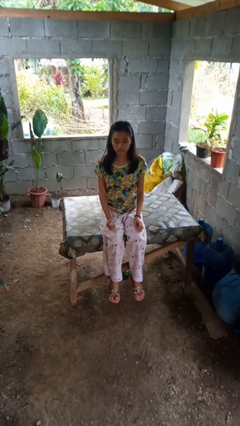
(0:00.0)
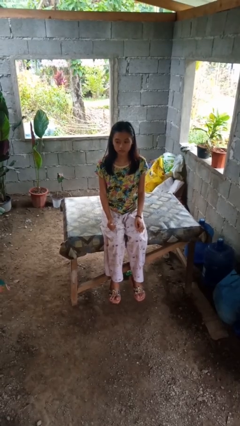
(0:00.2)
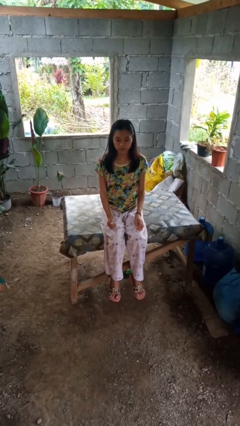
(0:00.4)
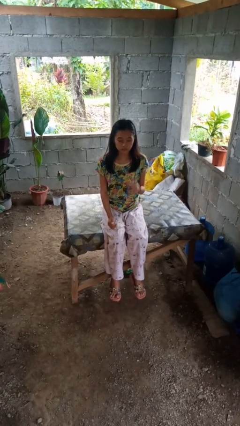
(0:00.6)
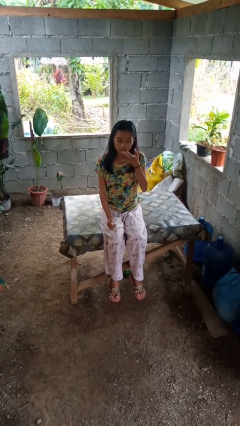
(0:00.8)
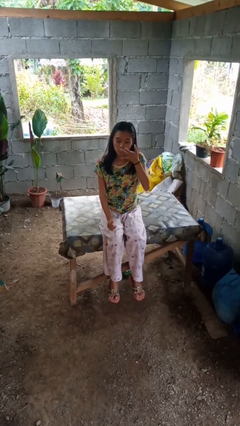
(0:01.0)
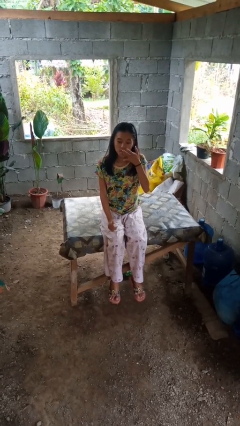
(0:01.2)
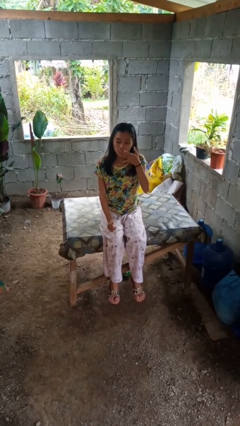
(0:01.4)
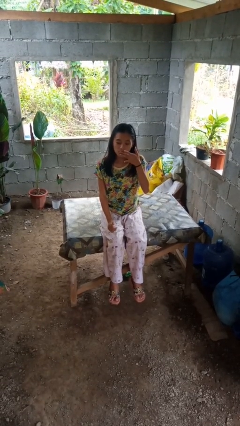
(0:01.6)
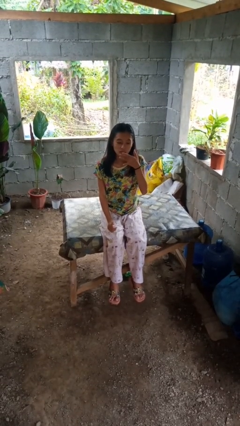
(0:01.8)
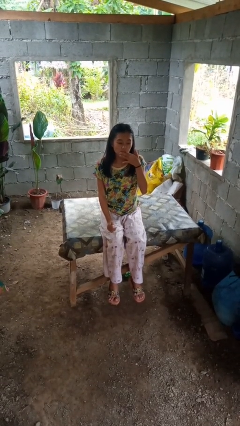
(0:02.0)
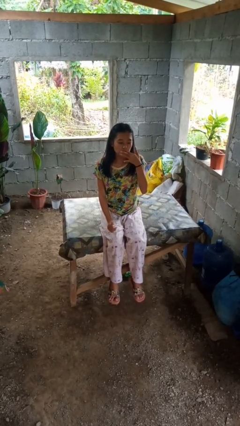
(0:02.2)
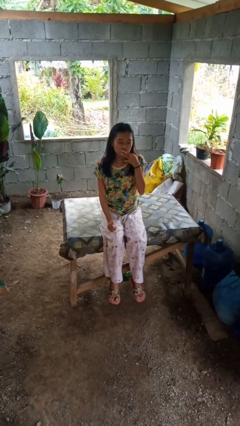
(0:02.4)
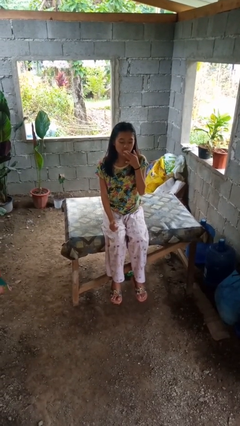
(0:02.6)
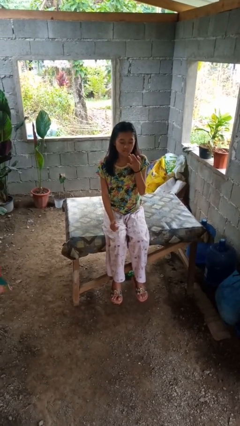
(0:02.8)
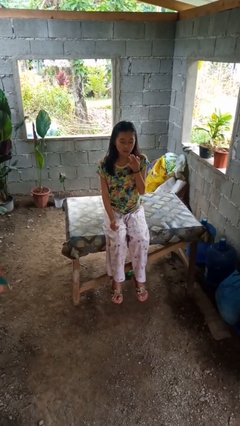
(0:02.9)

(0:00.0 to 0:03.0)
person licks fingers

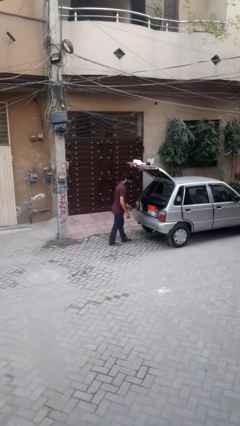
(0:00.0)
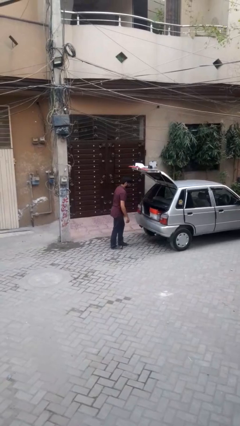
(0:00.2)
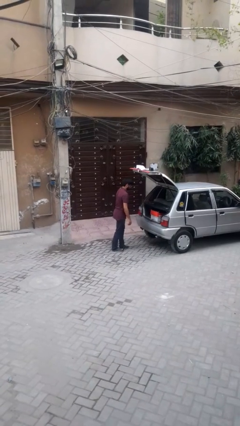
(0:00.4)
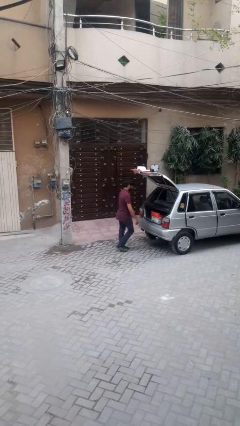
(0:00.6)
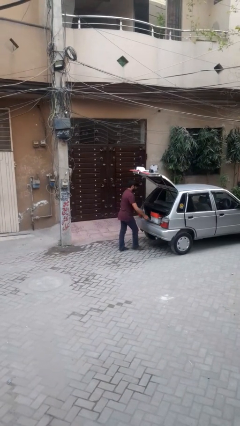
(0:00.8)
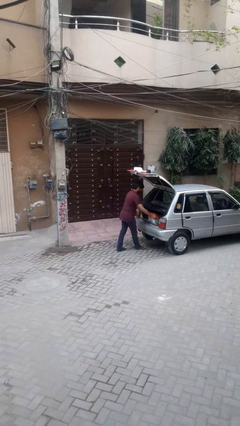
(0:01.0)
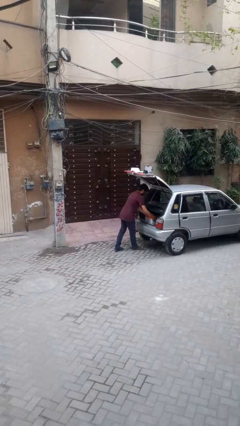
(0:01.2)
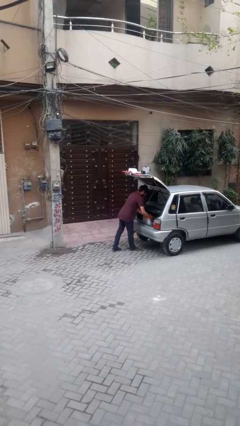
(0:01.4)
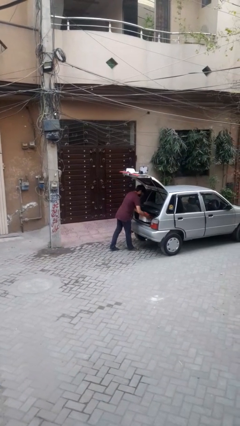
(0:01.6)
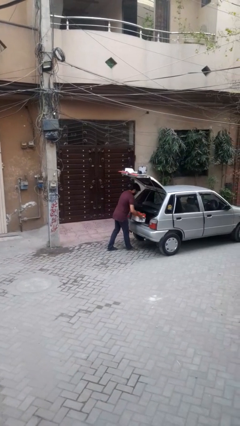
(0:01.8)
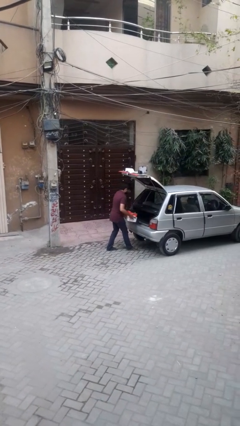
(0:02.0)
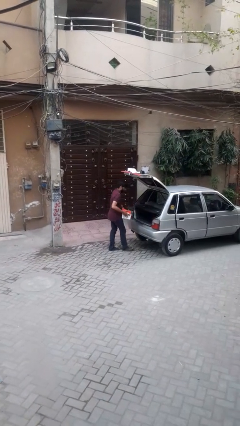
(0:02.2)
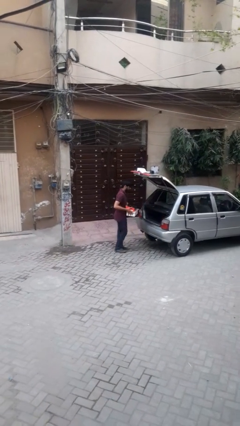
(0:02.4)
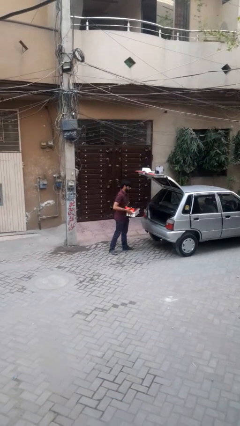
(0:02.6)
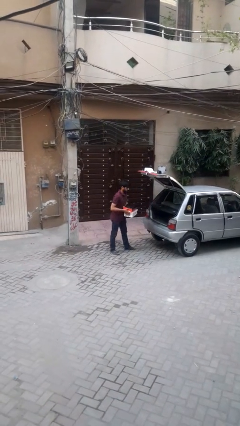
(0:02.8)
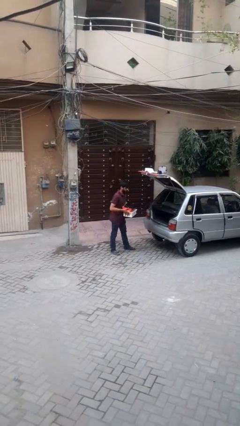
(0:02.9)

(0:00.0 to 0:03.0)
person unloads car

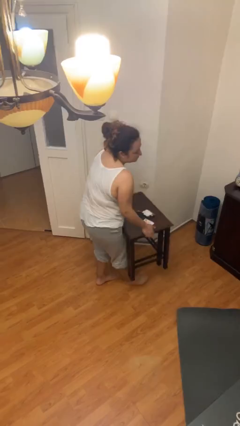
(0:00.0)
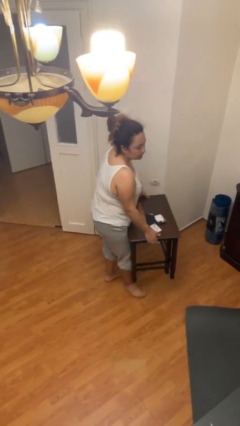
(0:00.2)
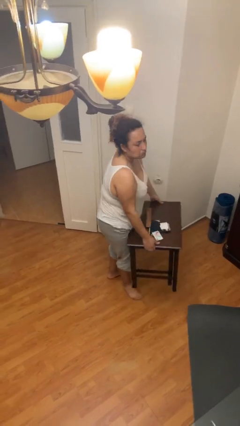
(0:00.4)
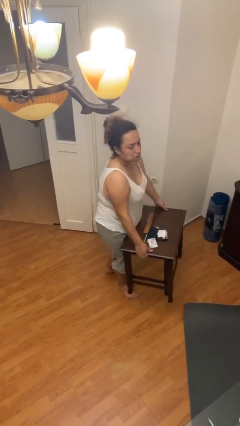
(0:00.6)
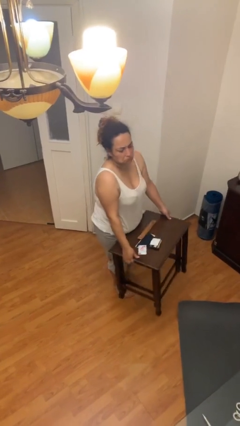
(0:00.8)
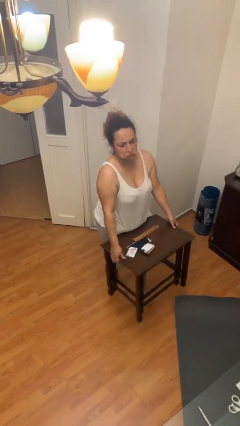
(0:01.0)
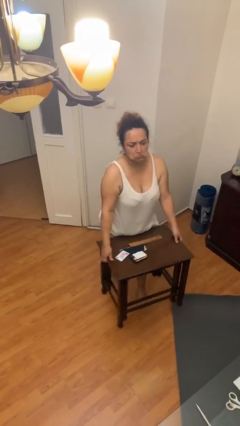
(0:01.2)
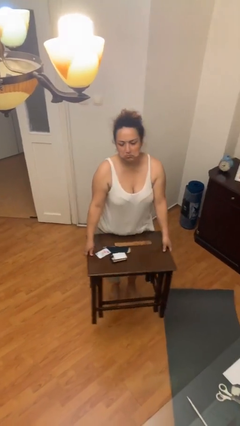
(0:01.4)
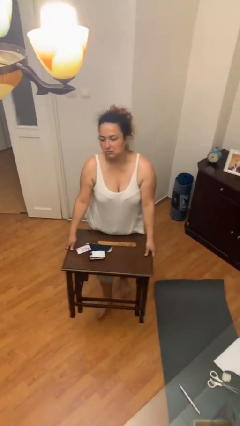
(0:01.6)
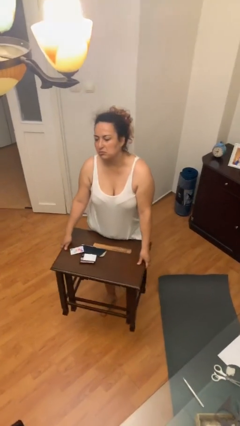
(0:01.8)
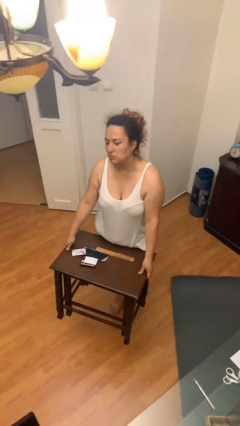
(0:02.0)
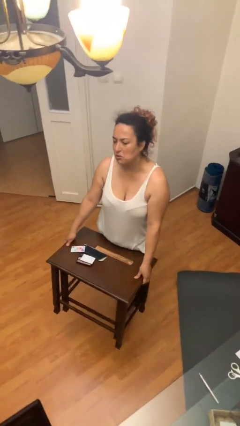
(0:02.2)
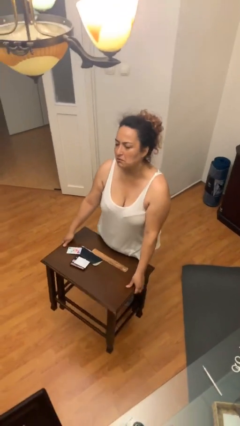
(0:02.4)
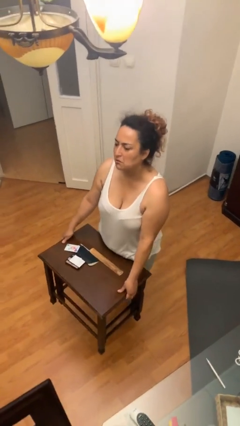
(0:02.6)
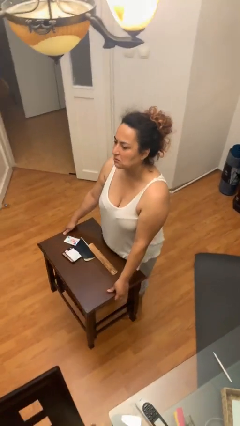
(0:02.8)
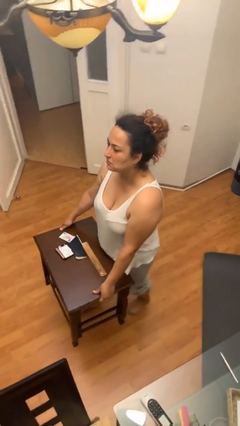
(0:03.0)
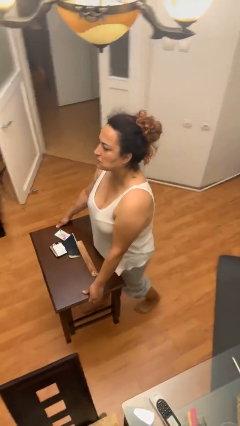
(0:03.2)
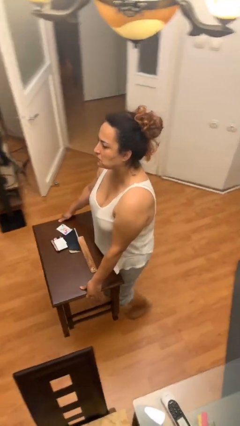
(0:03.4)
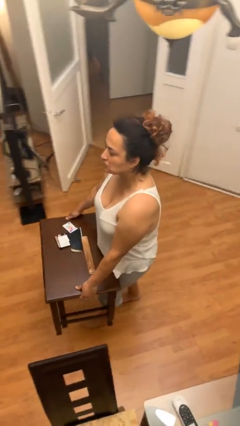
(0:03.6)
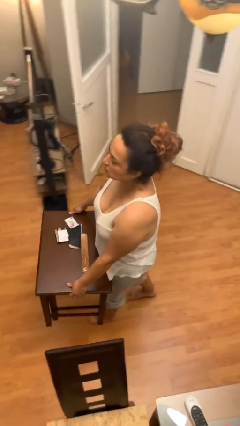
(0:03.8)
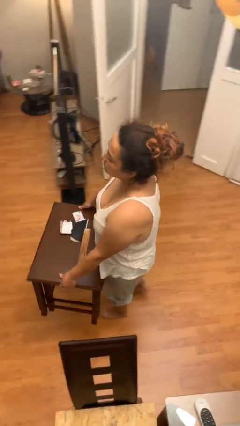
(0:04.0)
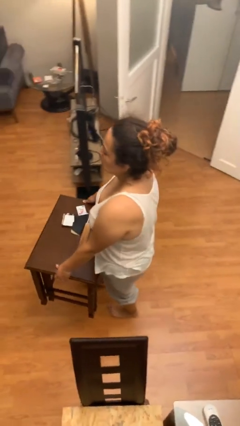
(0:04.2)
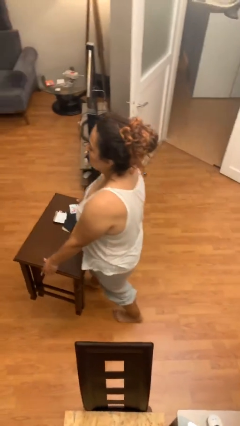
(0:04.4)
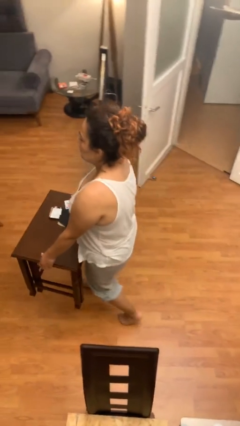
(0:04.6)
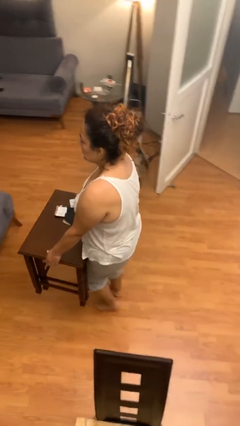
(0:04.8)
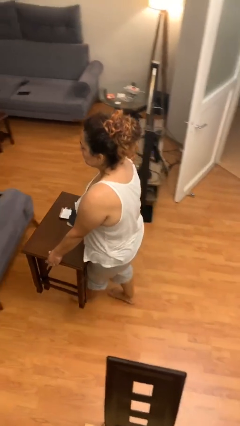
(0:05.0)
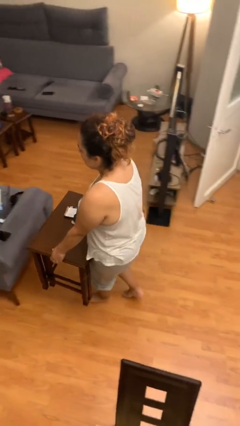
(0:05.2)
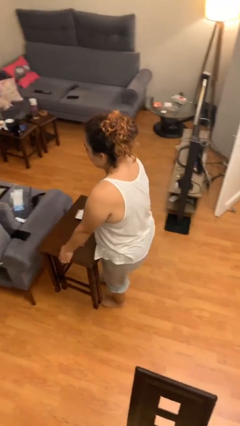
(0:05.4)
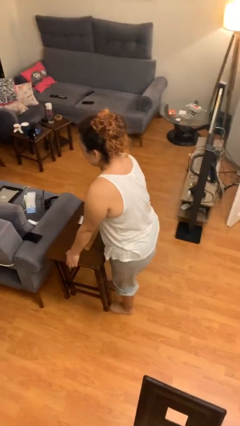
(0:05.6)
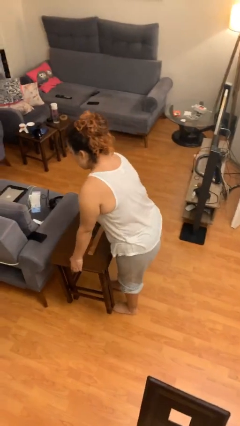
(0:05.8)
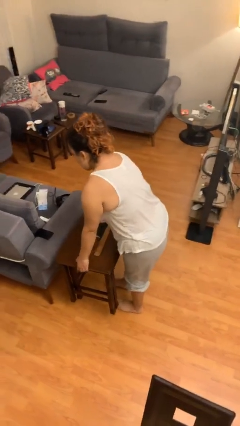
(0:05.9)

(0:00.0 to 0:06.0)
person carries heavy object

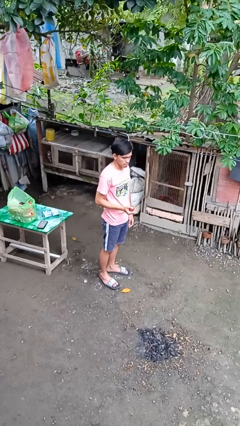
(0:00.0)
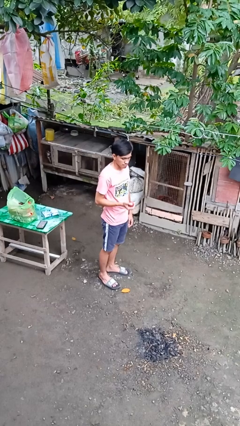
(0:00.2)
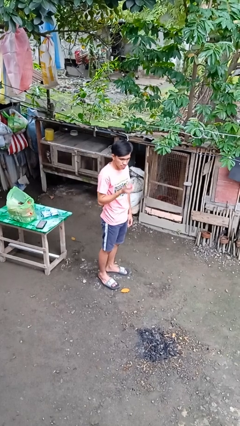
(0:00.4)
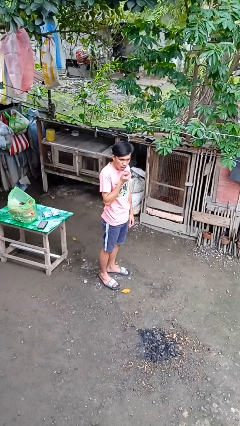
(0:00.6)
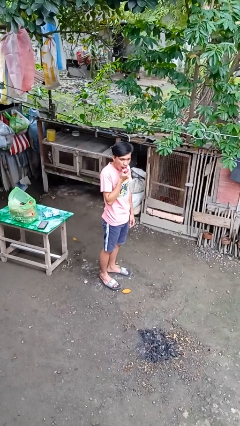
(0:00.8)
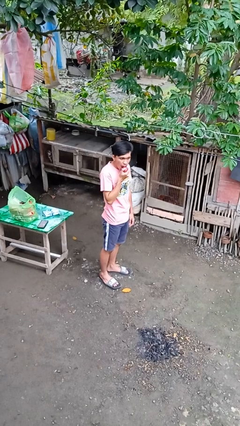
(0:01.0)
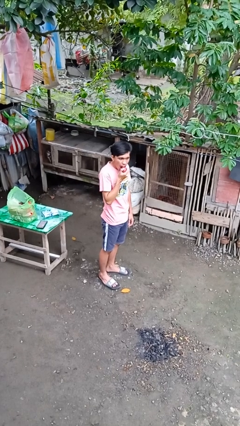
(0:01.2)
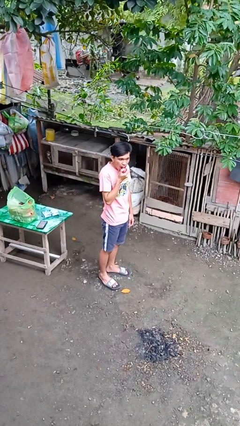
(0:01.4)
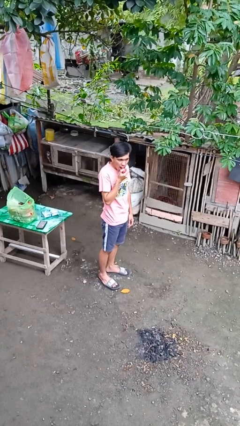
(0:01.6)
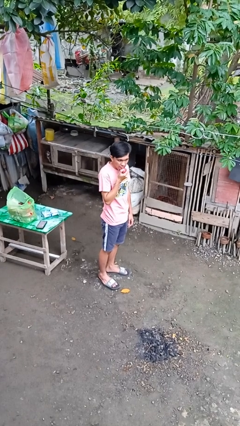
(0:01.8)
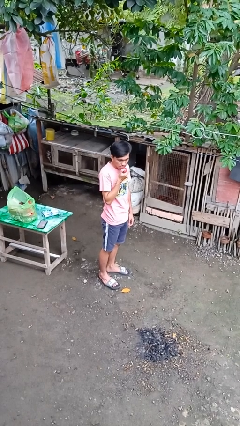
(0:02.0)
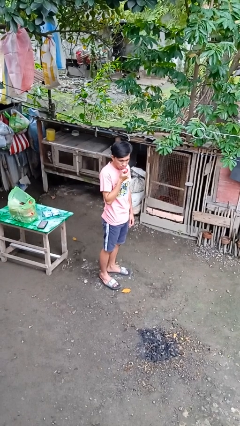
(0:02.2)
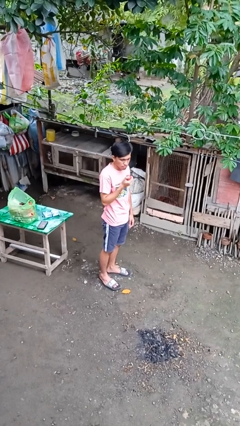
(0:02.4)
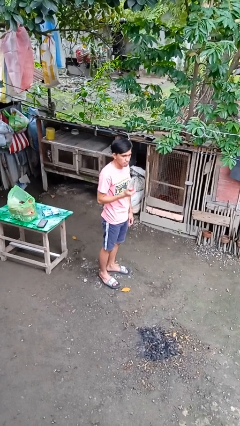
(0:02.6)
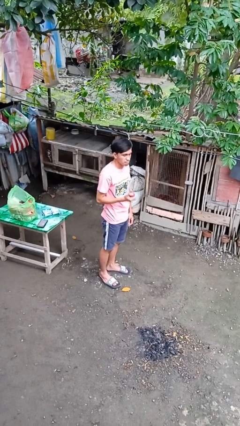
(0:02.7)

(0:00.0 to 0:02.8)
person eats apple

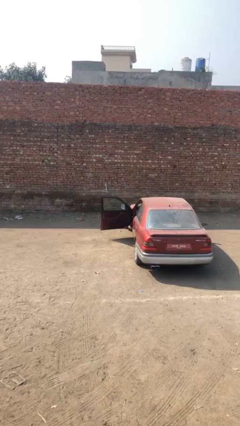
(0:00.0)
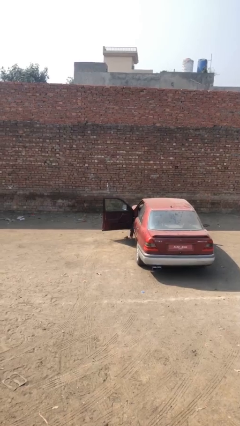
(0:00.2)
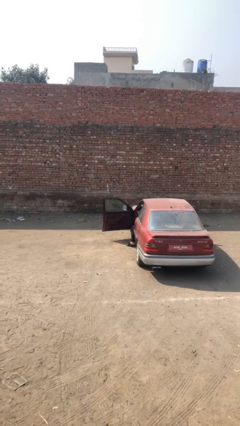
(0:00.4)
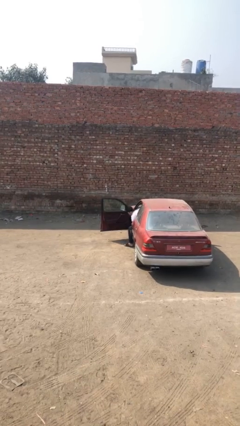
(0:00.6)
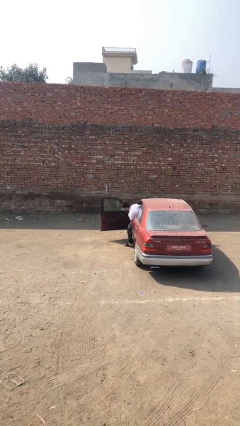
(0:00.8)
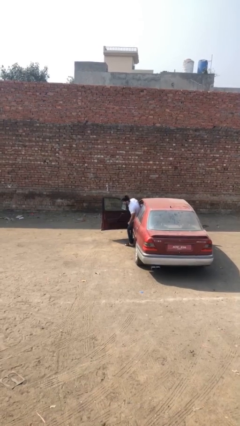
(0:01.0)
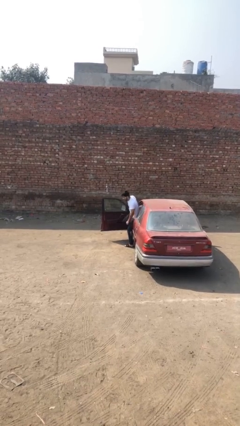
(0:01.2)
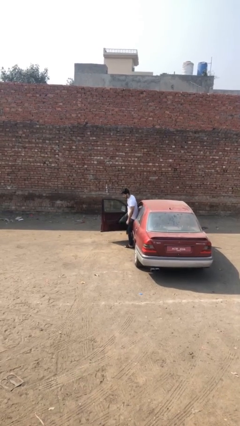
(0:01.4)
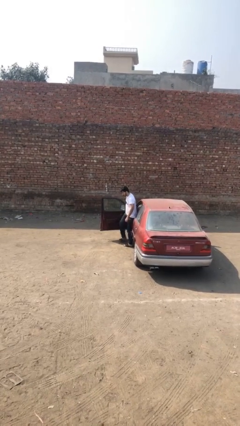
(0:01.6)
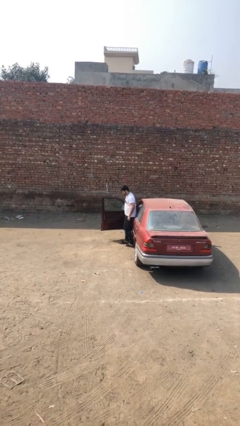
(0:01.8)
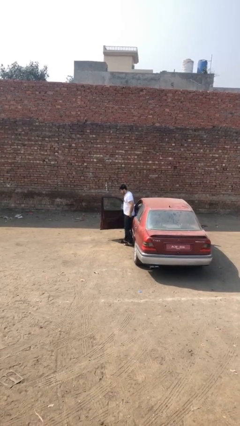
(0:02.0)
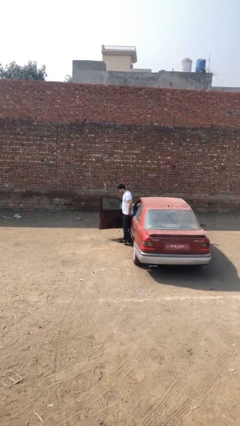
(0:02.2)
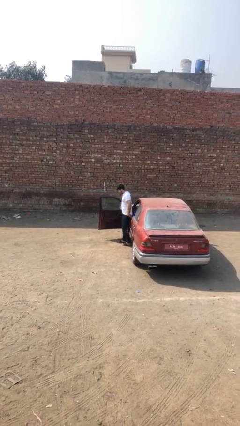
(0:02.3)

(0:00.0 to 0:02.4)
person exits car

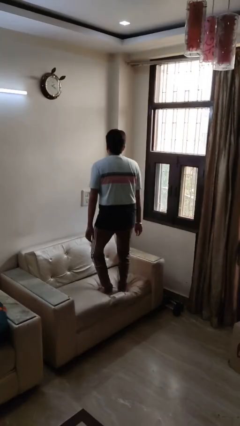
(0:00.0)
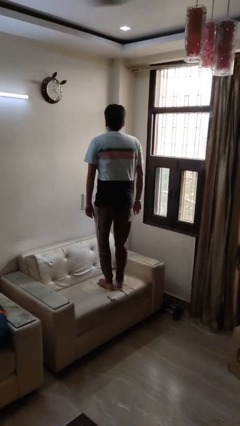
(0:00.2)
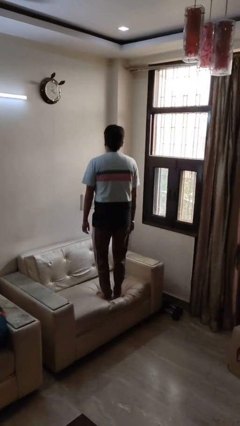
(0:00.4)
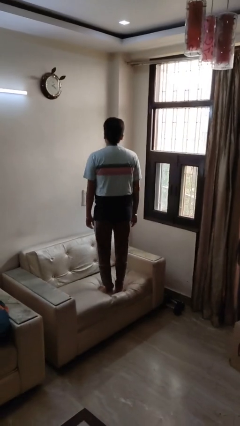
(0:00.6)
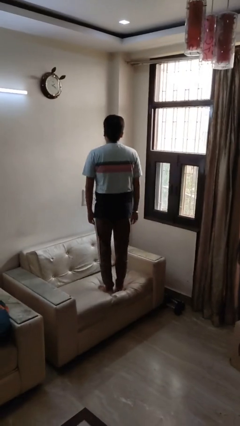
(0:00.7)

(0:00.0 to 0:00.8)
person jumps on couch
